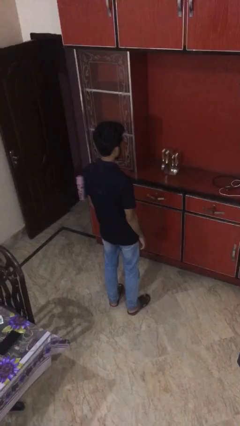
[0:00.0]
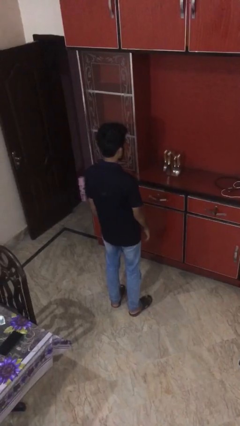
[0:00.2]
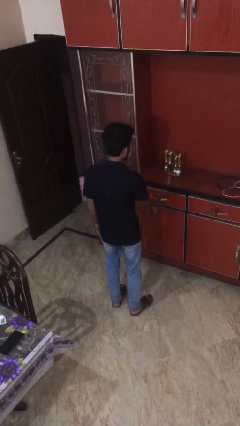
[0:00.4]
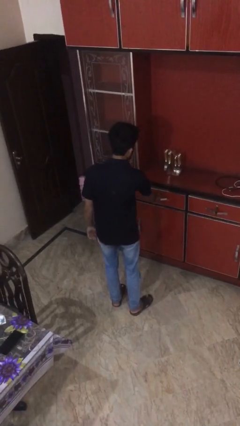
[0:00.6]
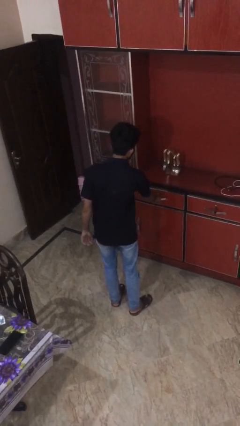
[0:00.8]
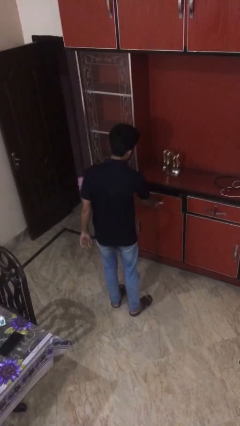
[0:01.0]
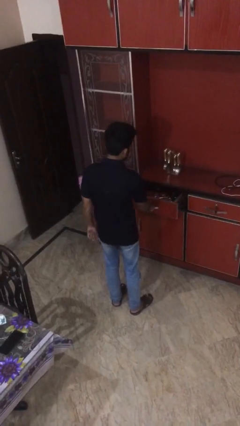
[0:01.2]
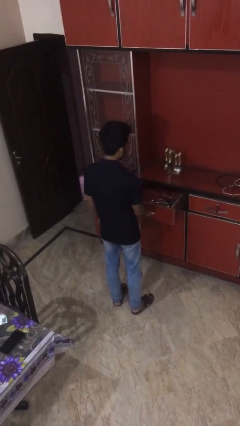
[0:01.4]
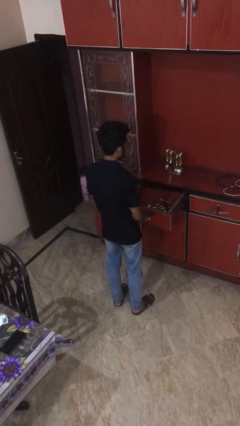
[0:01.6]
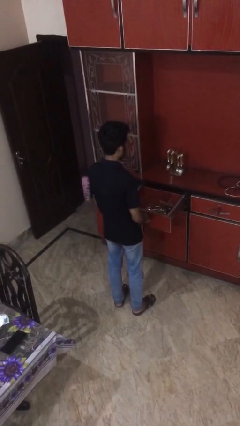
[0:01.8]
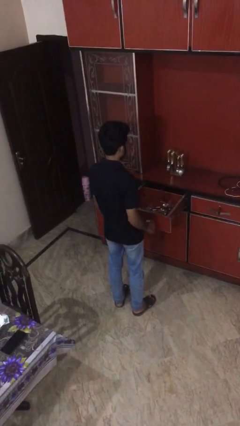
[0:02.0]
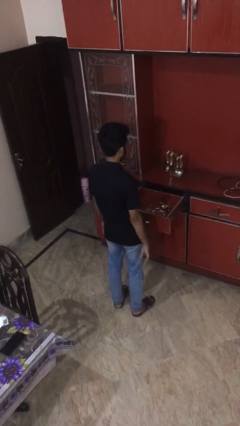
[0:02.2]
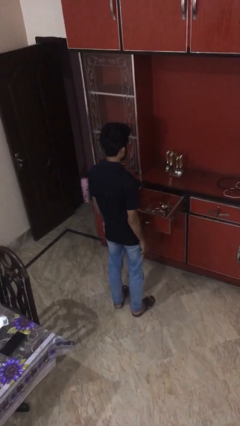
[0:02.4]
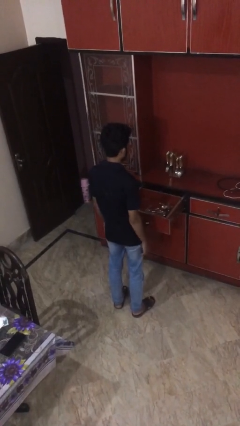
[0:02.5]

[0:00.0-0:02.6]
person opens kitchen drawer

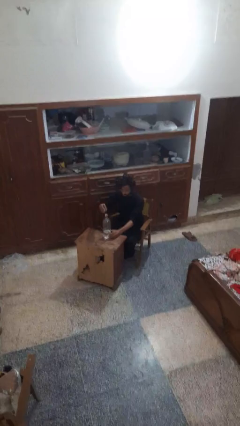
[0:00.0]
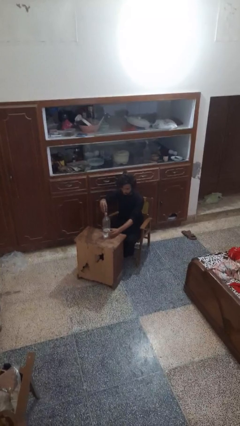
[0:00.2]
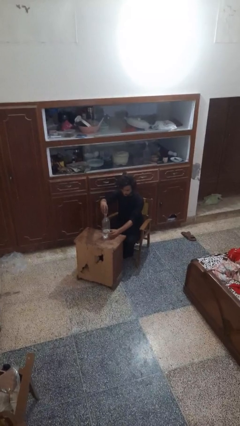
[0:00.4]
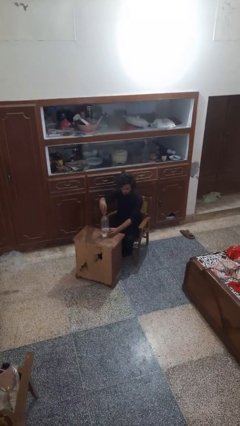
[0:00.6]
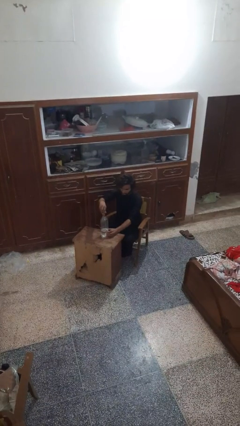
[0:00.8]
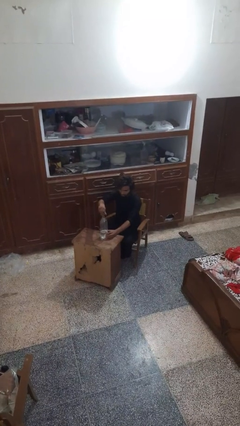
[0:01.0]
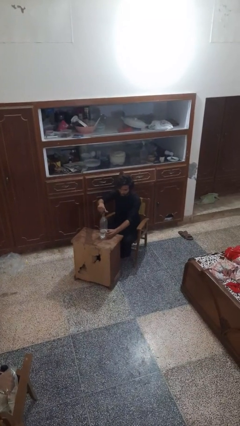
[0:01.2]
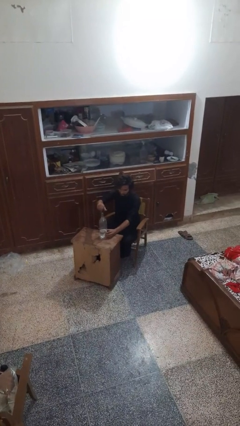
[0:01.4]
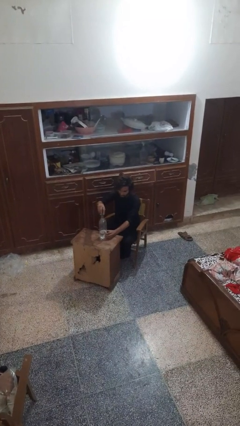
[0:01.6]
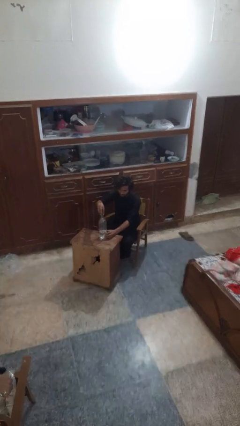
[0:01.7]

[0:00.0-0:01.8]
person screws lid to bottle

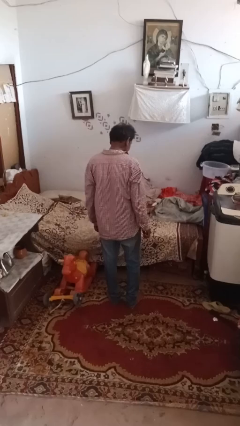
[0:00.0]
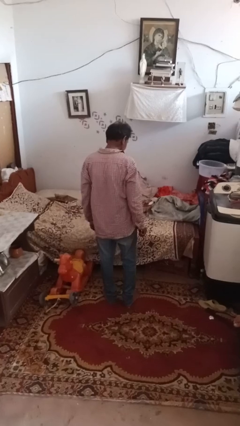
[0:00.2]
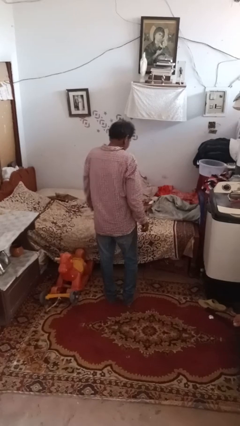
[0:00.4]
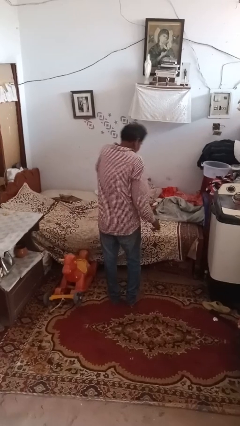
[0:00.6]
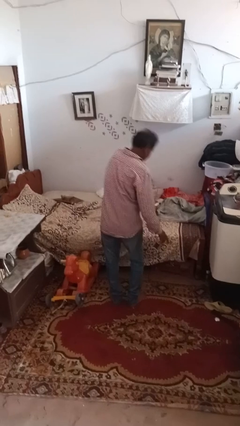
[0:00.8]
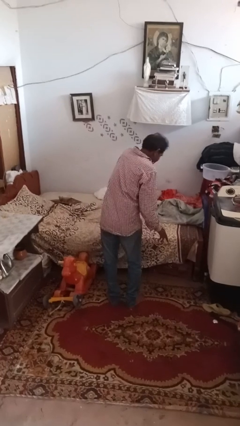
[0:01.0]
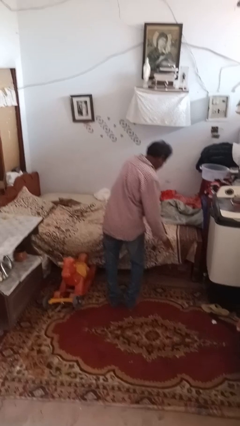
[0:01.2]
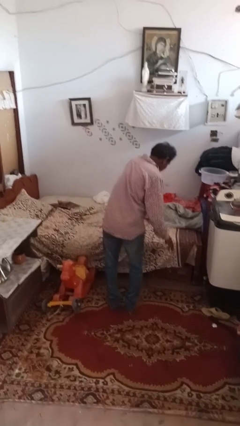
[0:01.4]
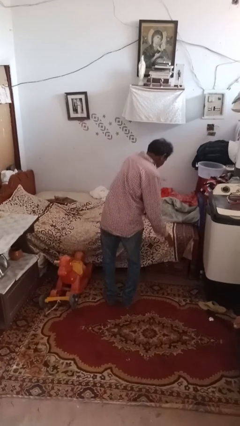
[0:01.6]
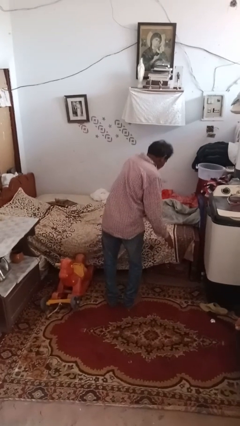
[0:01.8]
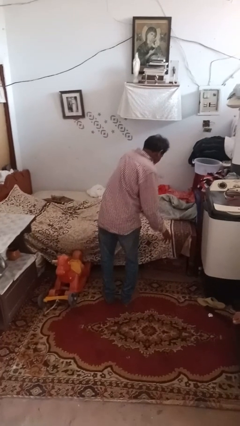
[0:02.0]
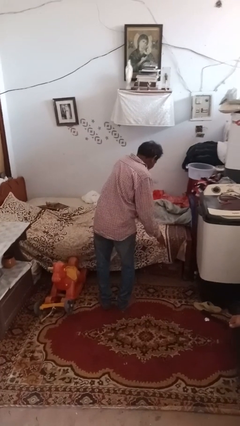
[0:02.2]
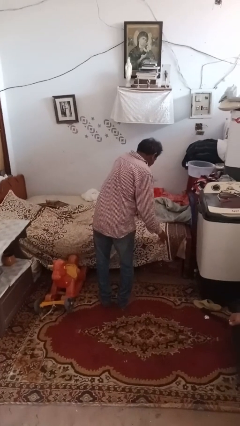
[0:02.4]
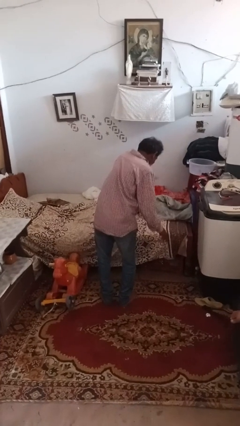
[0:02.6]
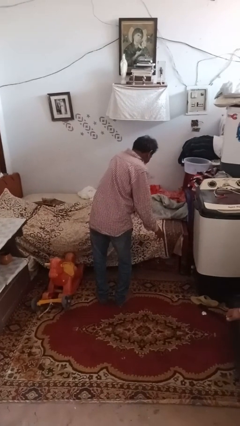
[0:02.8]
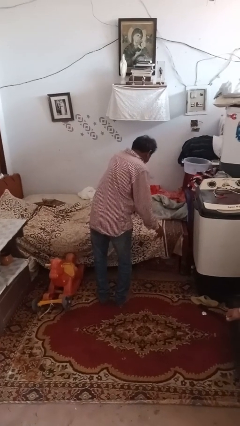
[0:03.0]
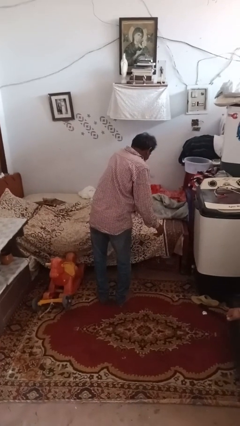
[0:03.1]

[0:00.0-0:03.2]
person dances in place

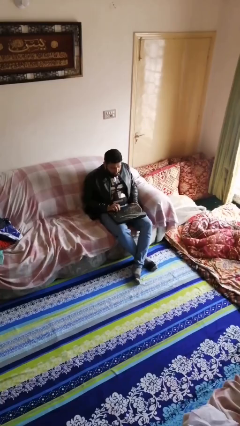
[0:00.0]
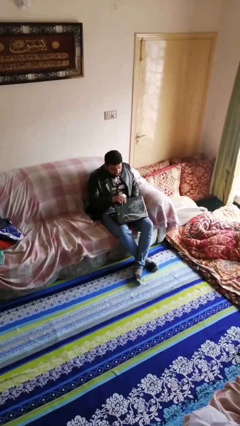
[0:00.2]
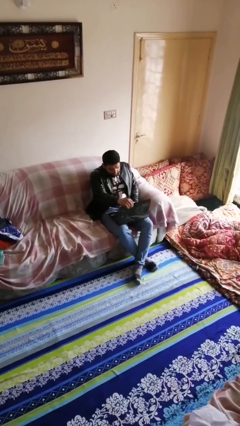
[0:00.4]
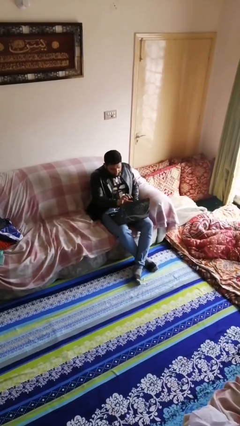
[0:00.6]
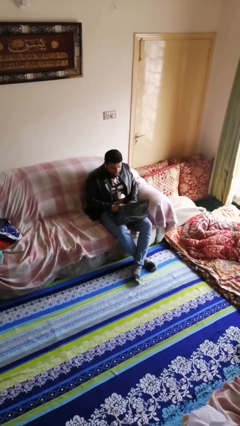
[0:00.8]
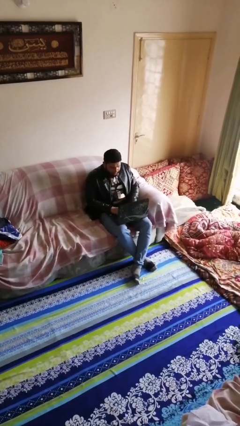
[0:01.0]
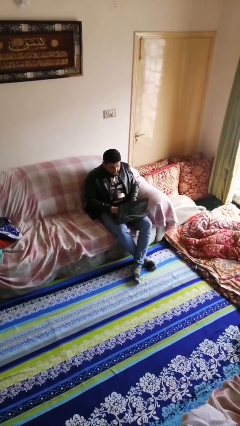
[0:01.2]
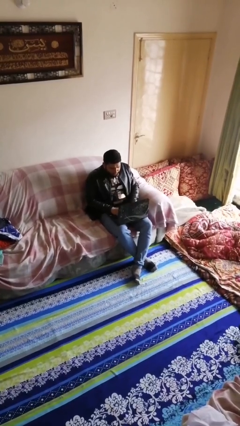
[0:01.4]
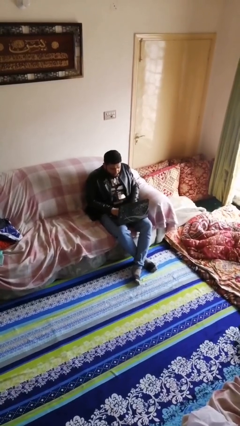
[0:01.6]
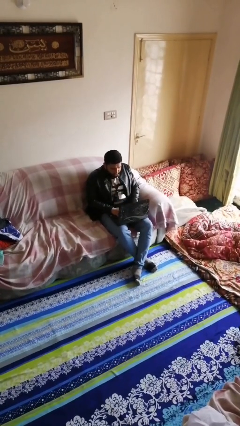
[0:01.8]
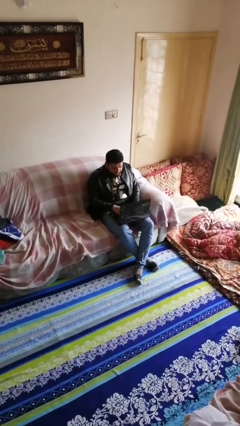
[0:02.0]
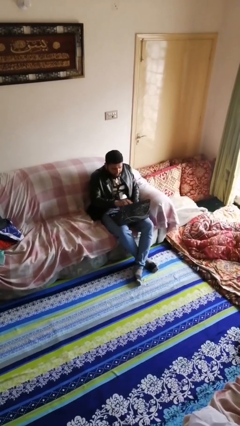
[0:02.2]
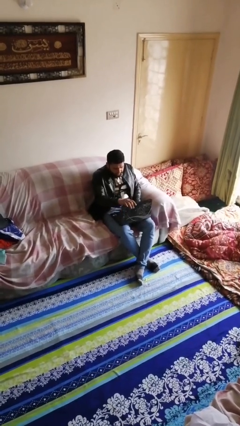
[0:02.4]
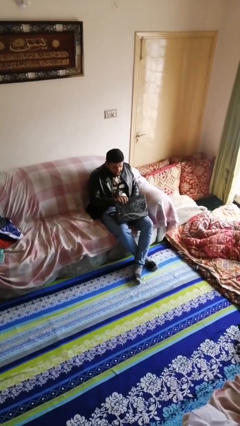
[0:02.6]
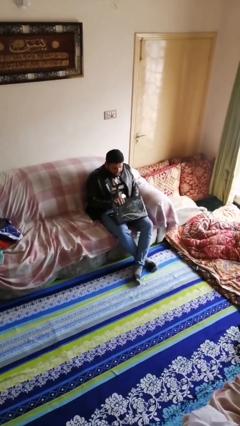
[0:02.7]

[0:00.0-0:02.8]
person interacts with laptop

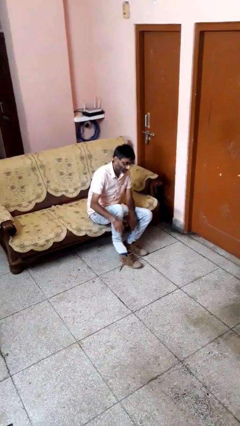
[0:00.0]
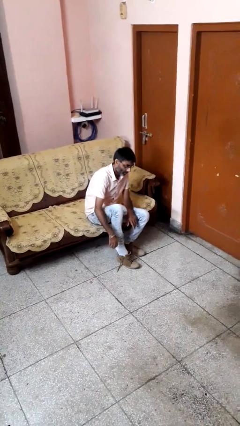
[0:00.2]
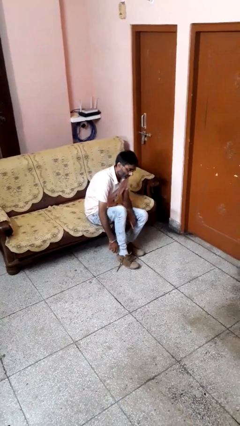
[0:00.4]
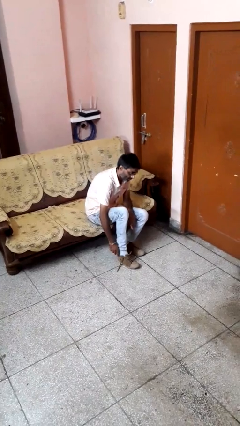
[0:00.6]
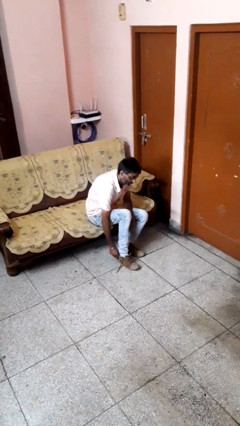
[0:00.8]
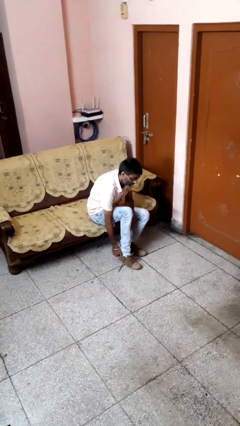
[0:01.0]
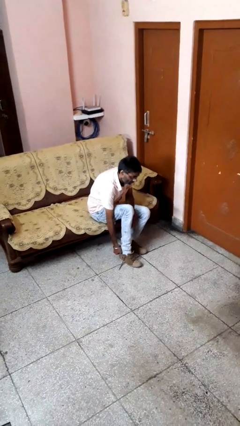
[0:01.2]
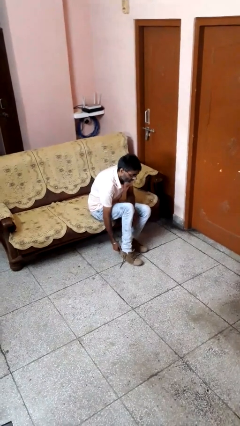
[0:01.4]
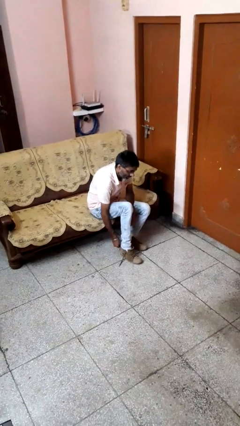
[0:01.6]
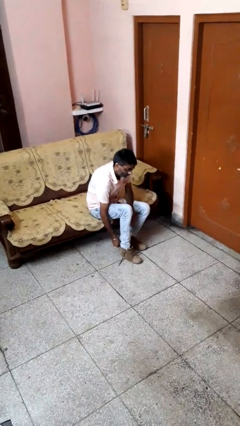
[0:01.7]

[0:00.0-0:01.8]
person puts on shoes

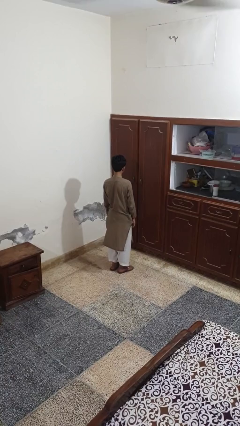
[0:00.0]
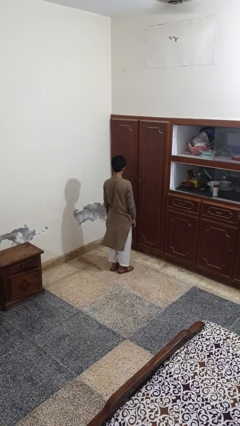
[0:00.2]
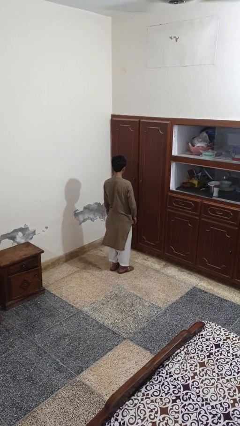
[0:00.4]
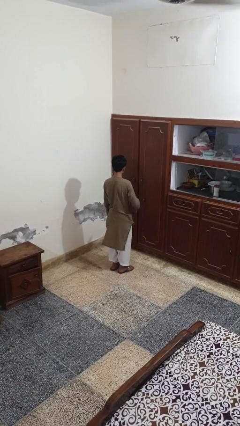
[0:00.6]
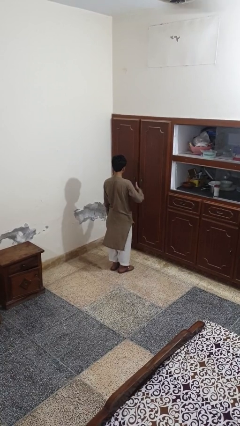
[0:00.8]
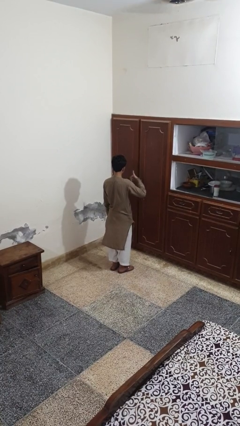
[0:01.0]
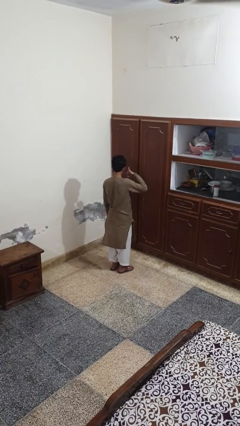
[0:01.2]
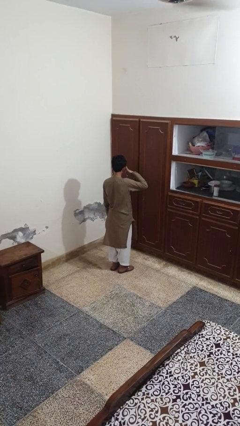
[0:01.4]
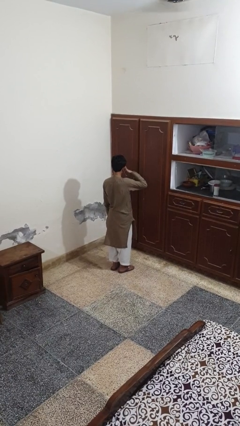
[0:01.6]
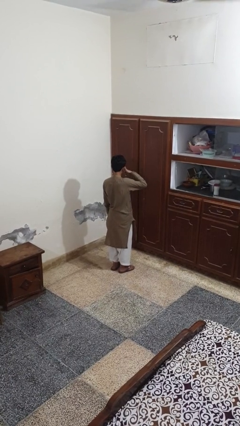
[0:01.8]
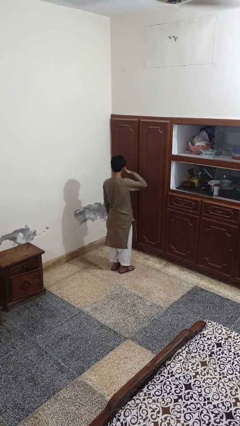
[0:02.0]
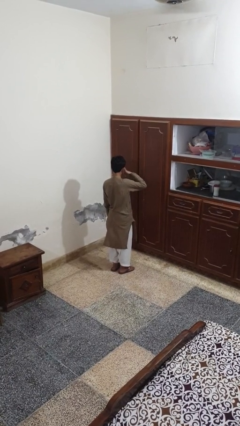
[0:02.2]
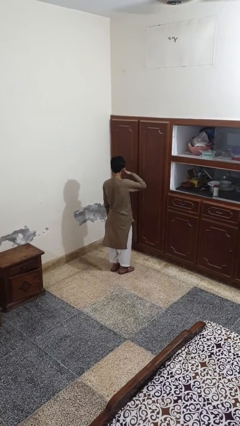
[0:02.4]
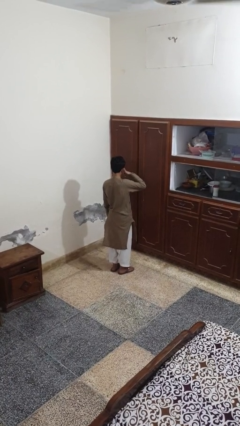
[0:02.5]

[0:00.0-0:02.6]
person gestures call me

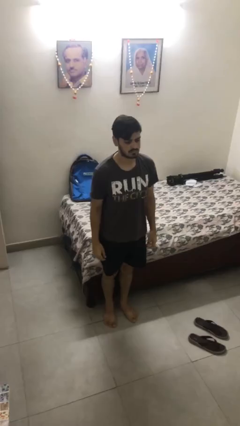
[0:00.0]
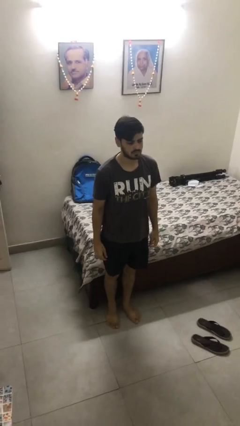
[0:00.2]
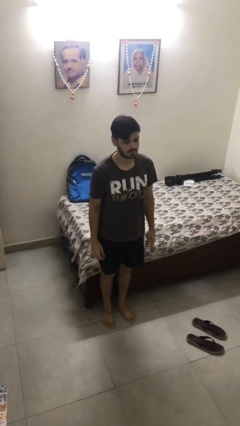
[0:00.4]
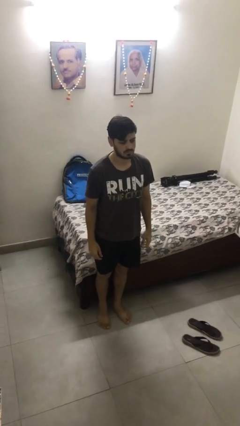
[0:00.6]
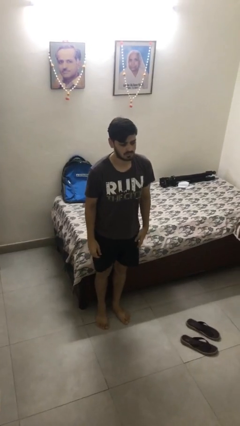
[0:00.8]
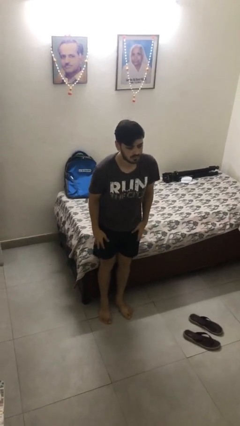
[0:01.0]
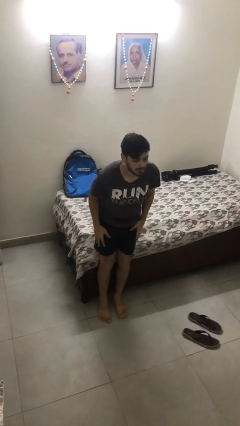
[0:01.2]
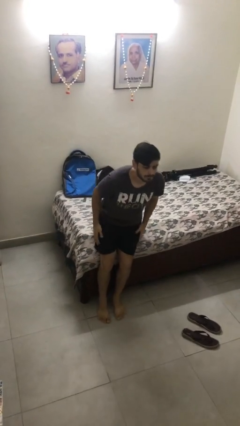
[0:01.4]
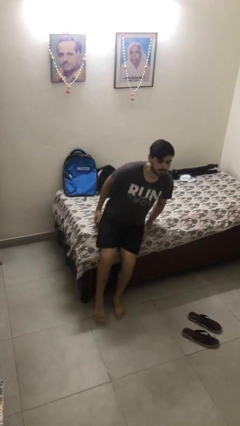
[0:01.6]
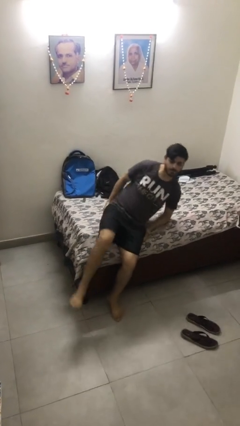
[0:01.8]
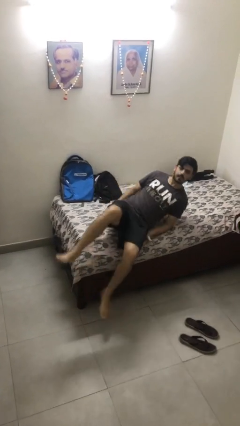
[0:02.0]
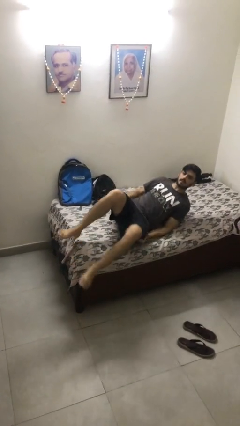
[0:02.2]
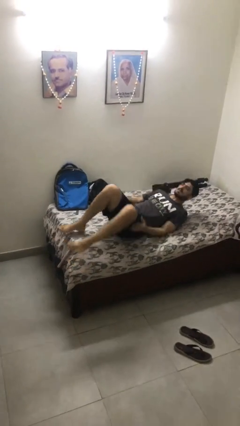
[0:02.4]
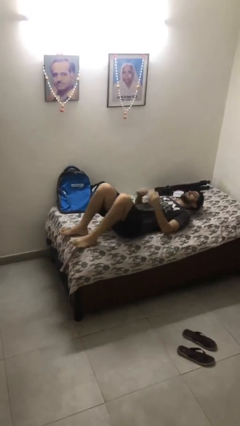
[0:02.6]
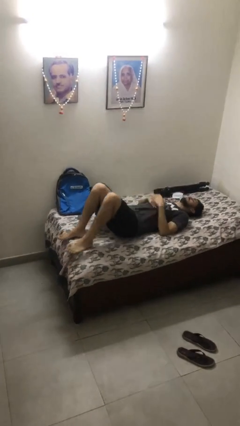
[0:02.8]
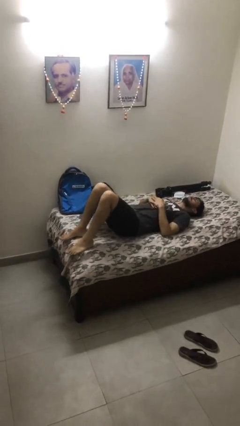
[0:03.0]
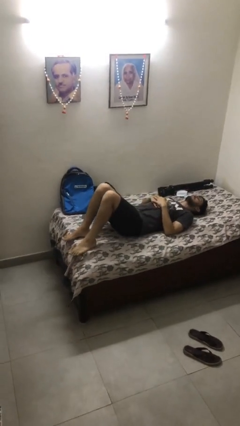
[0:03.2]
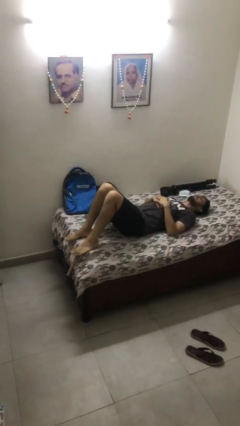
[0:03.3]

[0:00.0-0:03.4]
person lies down on bed
